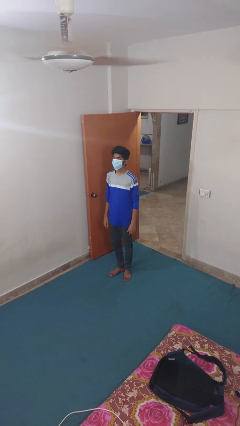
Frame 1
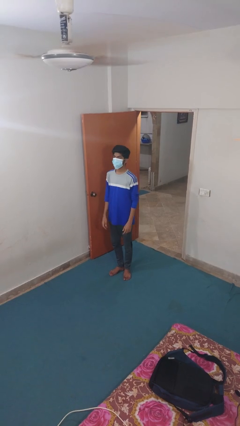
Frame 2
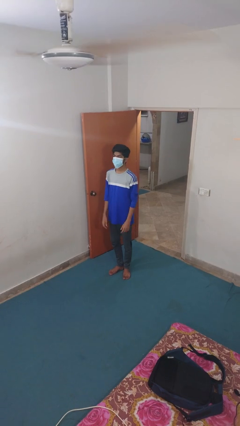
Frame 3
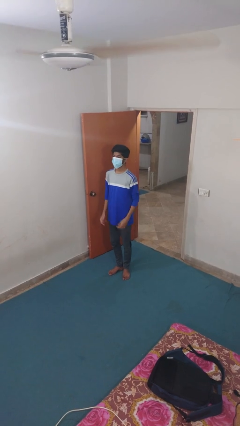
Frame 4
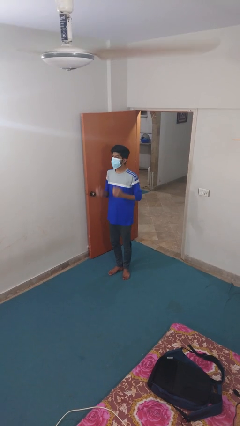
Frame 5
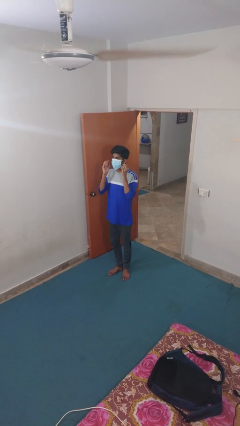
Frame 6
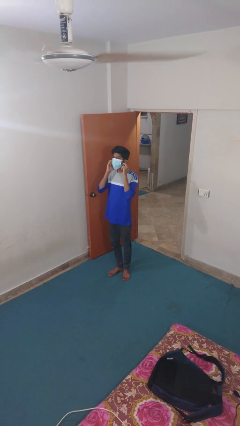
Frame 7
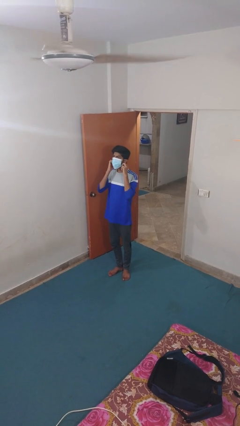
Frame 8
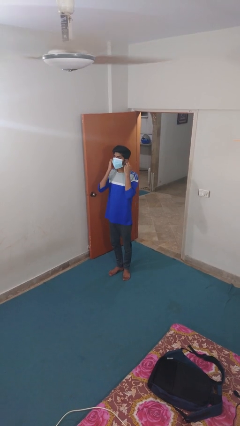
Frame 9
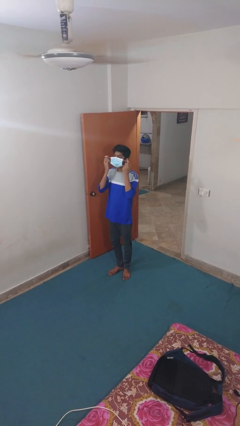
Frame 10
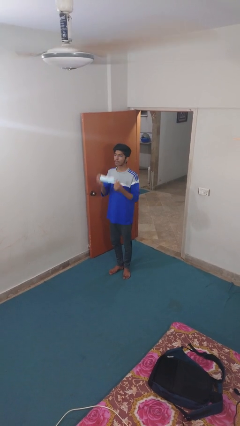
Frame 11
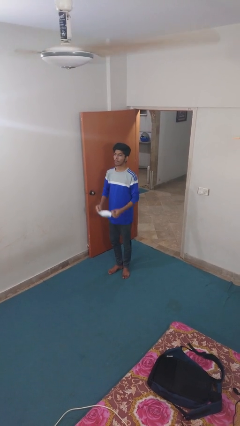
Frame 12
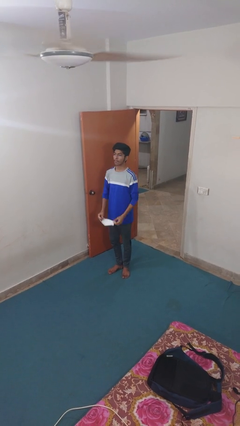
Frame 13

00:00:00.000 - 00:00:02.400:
person takes off facemask

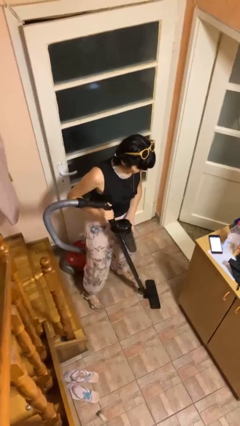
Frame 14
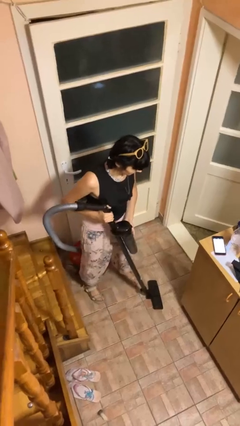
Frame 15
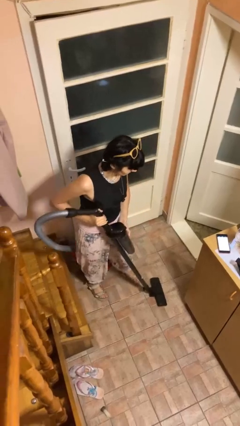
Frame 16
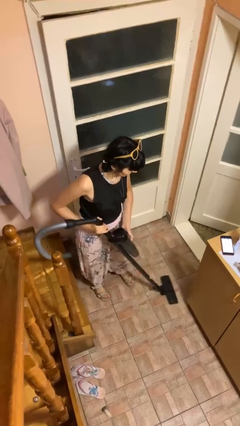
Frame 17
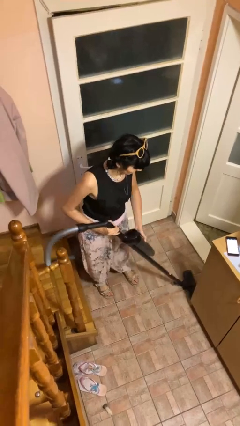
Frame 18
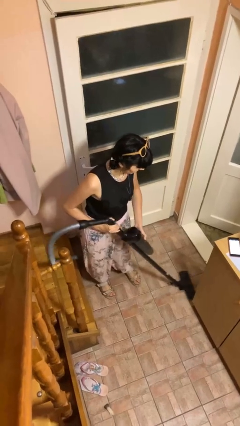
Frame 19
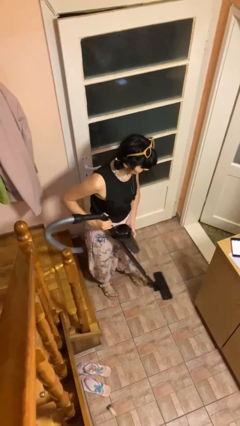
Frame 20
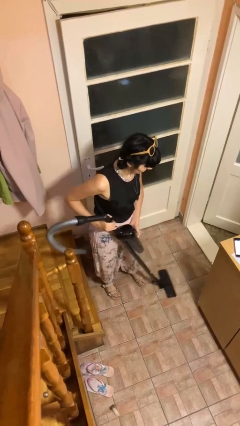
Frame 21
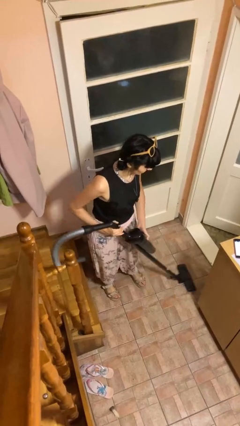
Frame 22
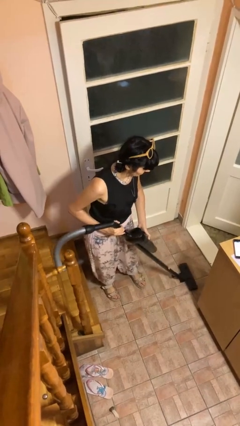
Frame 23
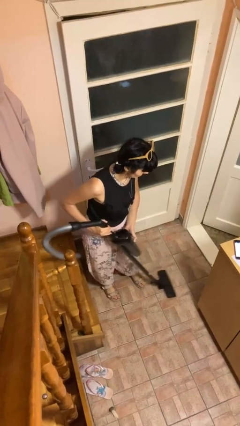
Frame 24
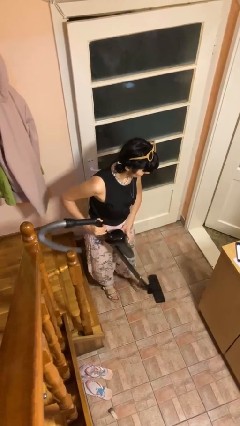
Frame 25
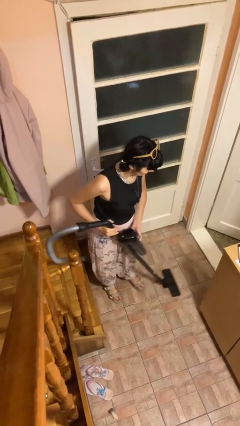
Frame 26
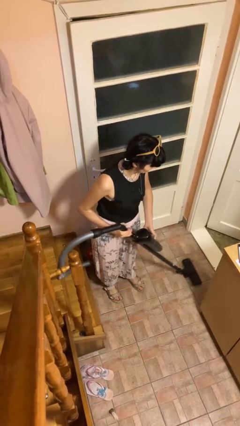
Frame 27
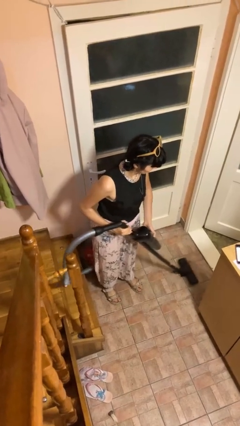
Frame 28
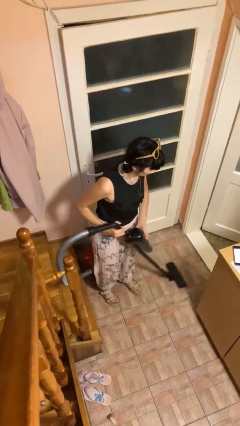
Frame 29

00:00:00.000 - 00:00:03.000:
person vacuums carpet

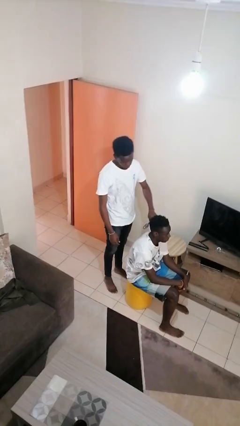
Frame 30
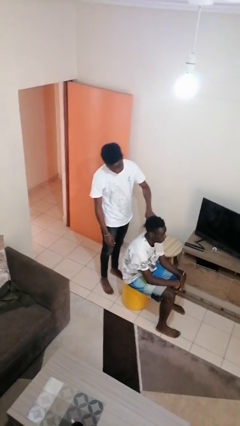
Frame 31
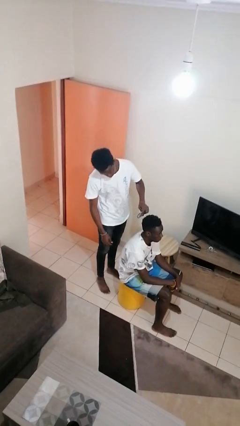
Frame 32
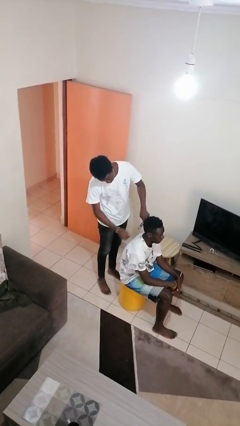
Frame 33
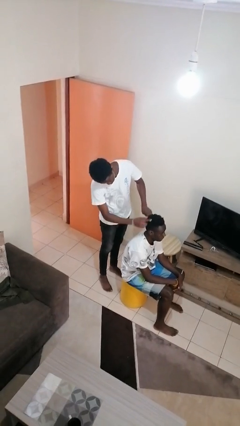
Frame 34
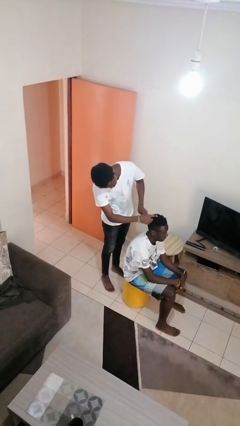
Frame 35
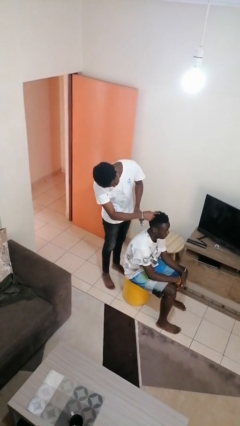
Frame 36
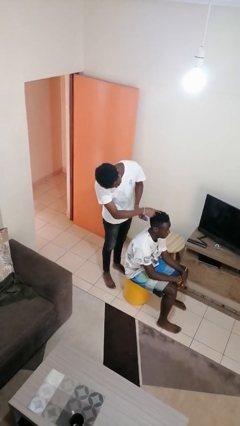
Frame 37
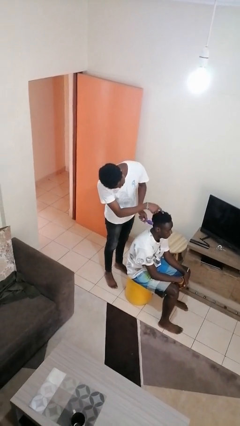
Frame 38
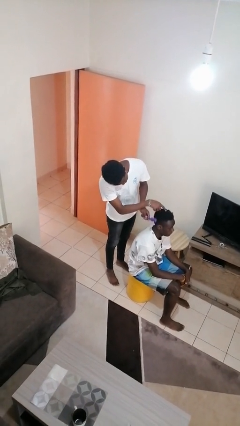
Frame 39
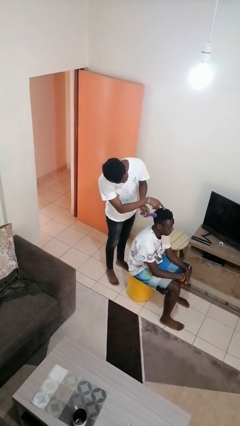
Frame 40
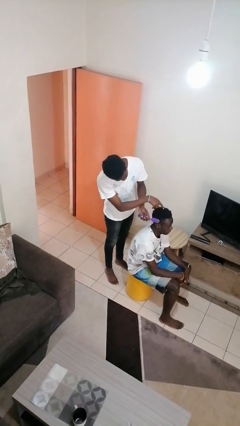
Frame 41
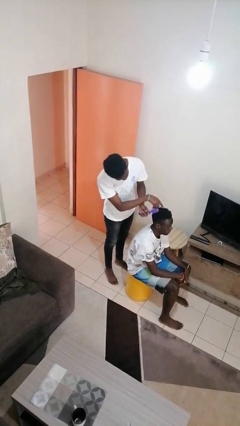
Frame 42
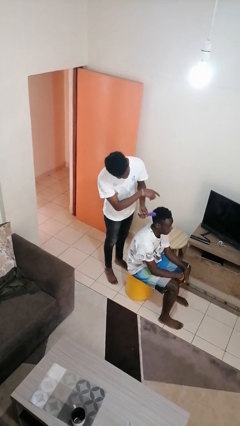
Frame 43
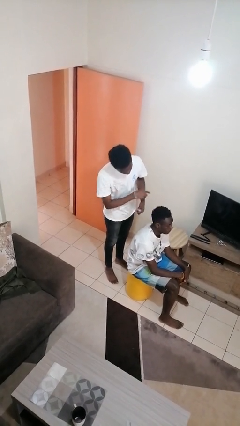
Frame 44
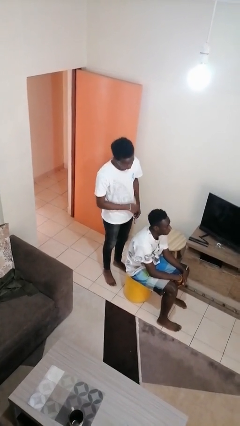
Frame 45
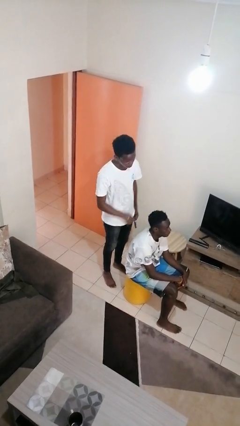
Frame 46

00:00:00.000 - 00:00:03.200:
person brushes hair of person

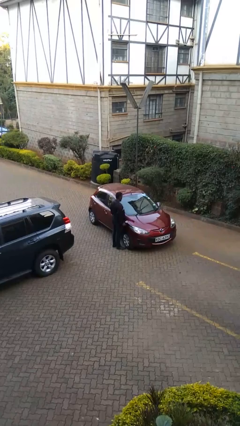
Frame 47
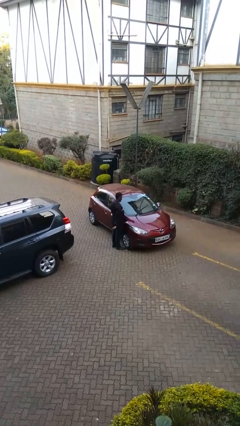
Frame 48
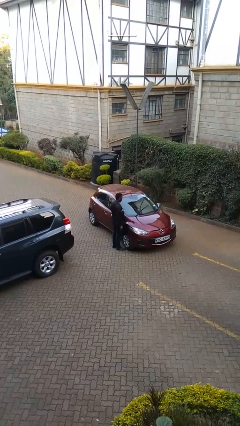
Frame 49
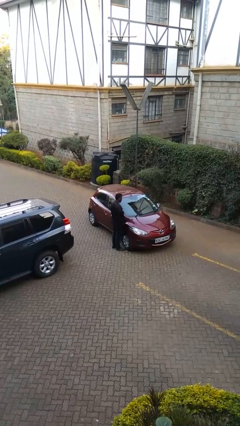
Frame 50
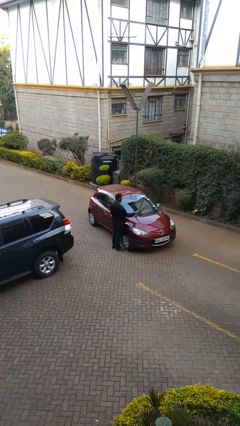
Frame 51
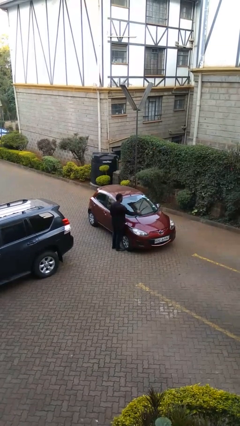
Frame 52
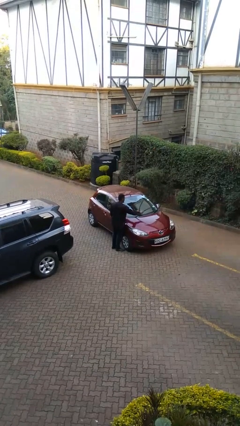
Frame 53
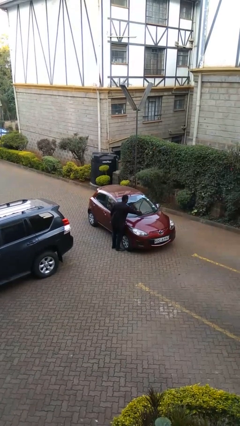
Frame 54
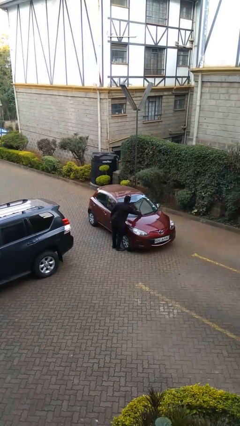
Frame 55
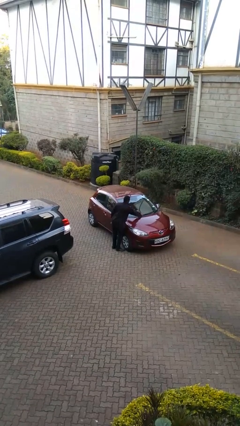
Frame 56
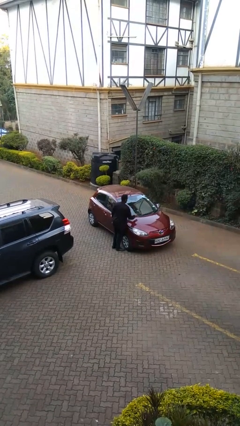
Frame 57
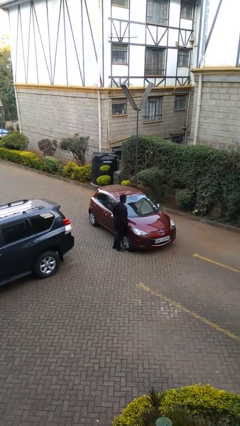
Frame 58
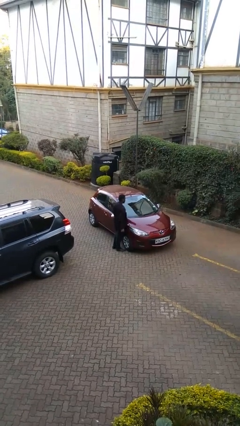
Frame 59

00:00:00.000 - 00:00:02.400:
person flips down car wipers

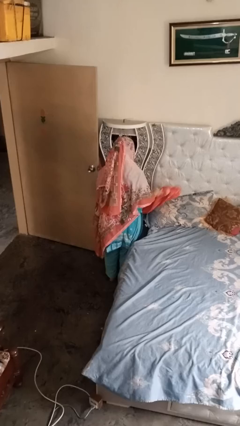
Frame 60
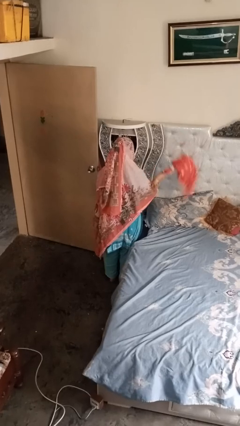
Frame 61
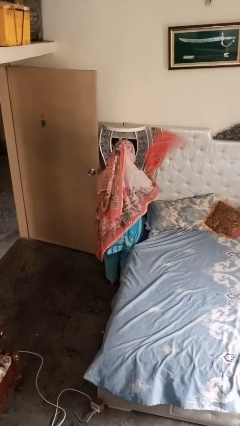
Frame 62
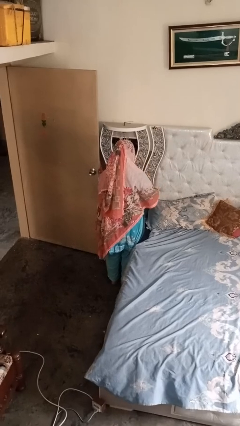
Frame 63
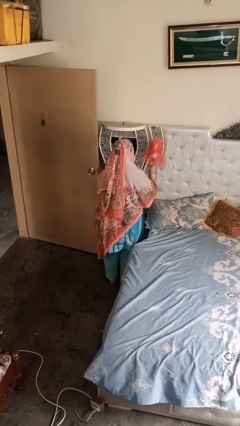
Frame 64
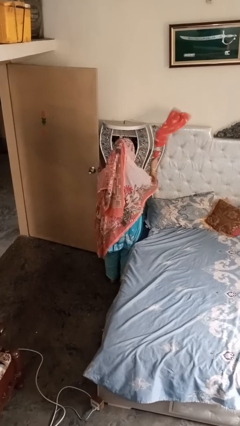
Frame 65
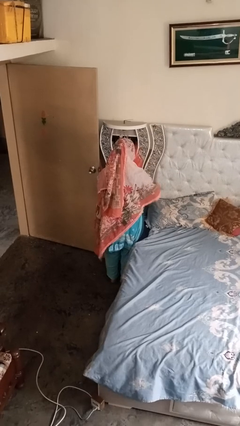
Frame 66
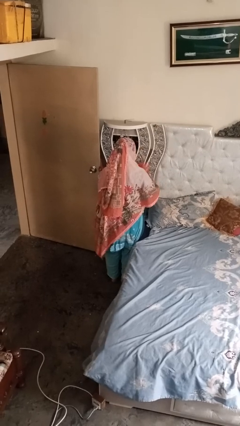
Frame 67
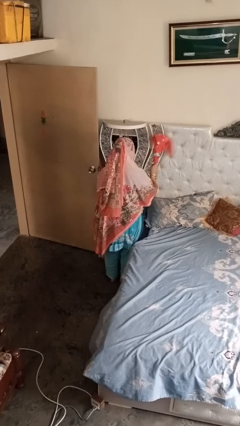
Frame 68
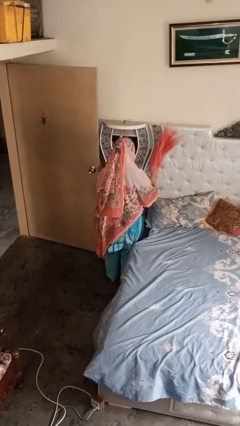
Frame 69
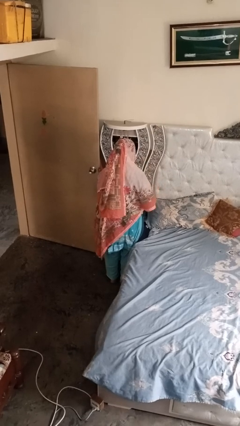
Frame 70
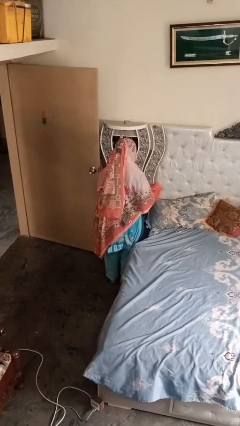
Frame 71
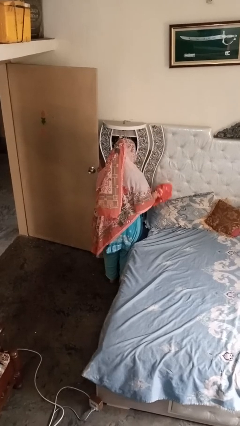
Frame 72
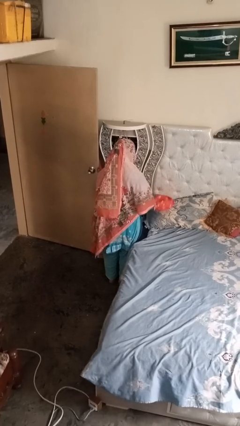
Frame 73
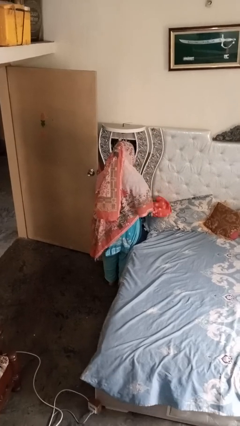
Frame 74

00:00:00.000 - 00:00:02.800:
person dusts furniture

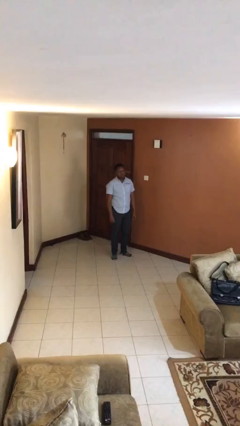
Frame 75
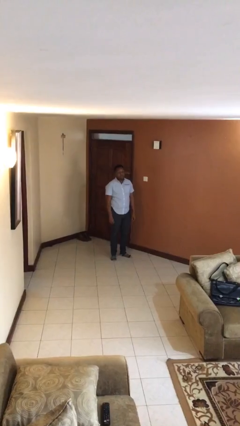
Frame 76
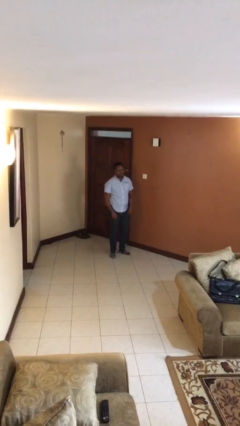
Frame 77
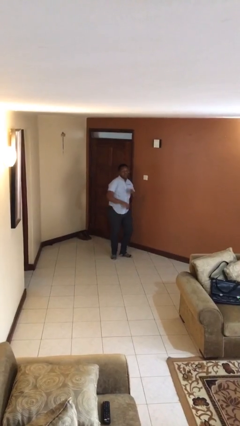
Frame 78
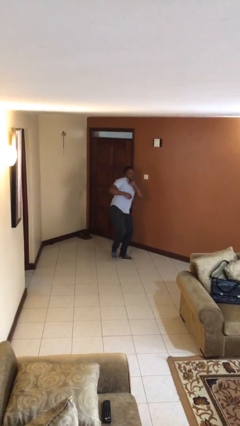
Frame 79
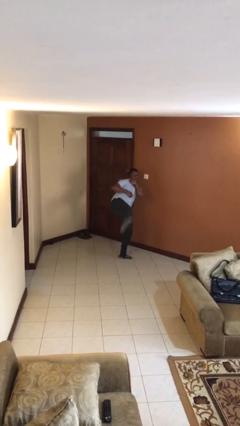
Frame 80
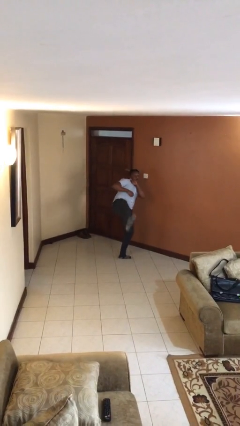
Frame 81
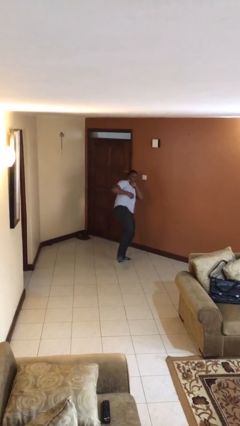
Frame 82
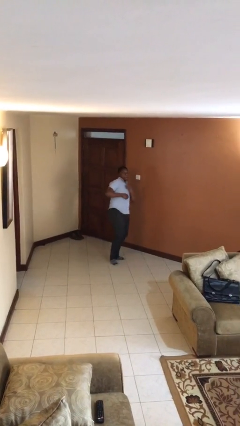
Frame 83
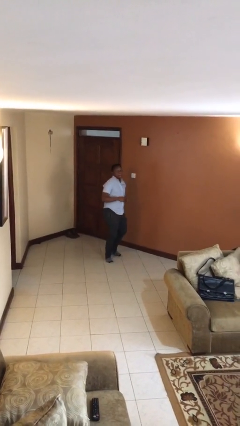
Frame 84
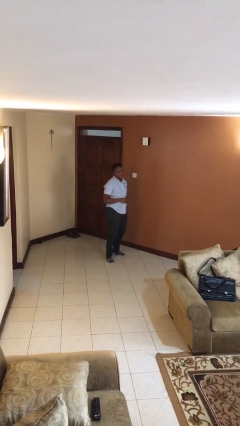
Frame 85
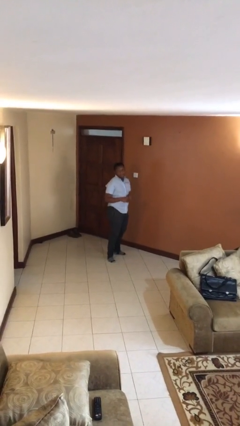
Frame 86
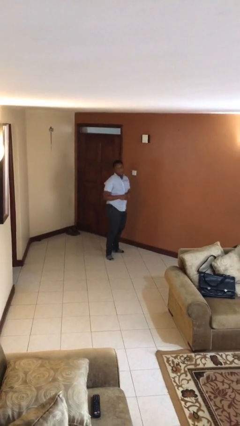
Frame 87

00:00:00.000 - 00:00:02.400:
person karate kicks

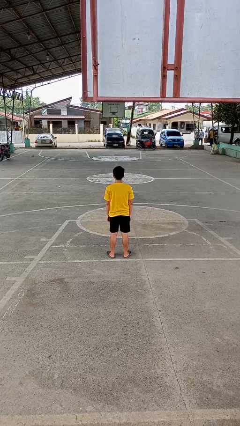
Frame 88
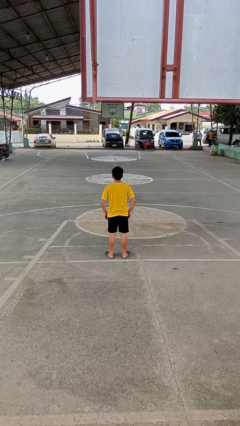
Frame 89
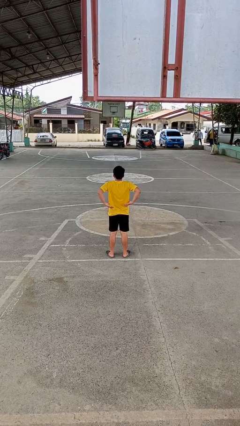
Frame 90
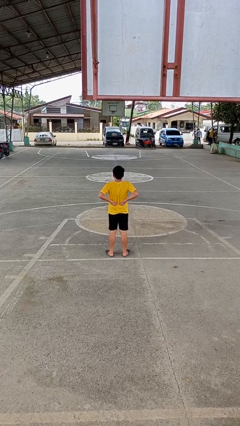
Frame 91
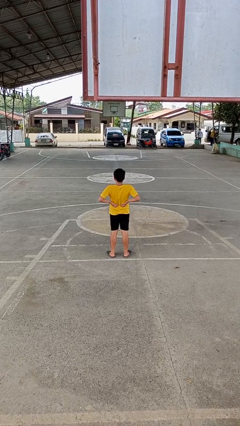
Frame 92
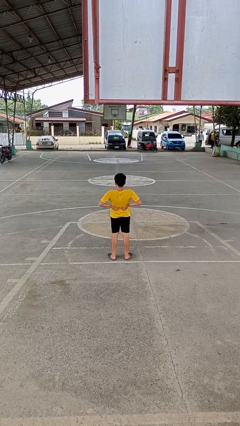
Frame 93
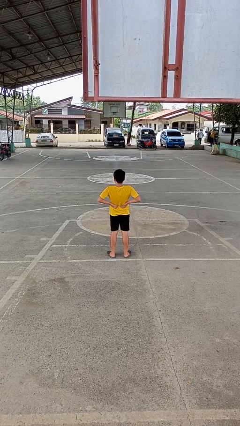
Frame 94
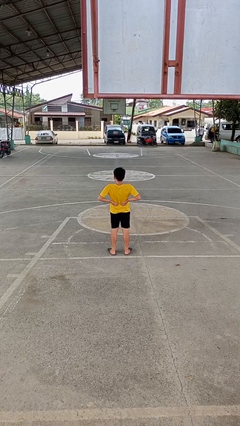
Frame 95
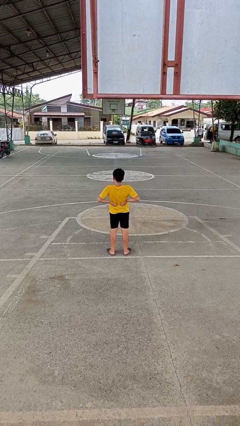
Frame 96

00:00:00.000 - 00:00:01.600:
person stretches back
